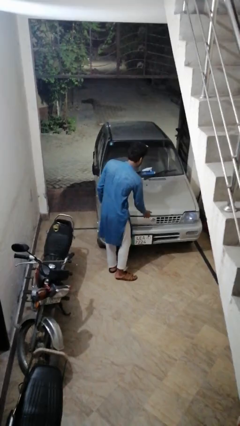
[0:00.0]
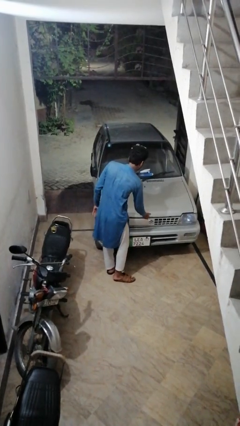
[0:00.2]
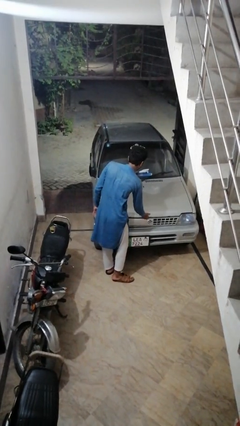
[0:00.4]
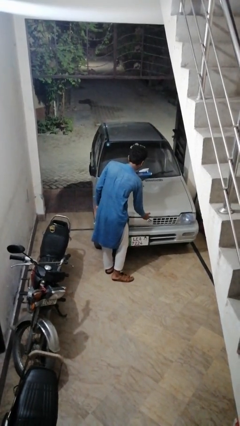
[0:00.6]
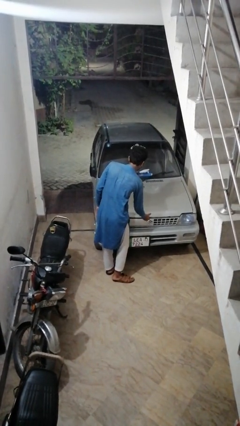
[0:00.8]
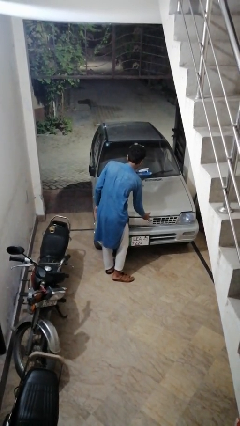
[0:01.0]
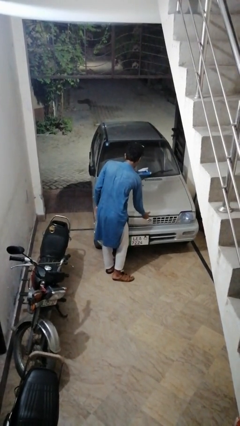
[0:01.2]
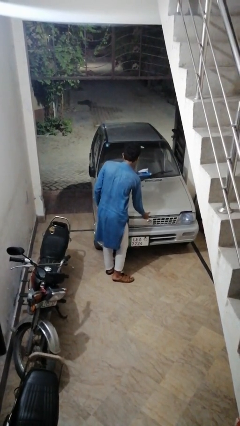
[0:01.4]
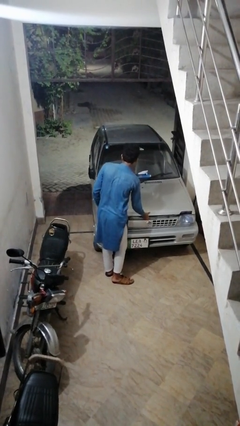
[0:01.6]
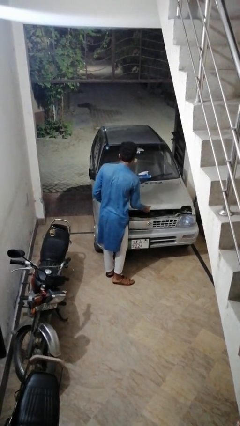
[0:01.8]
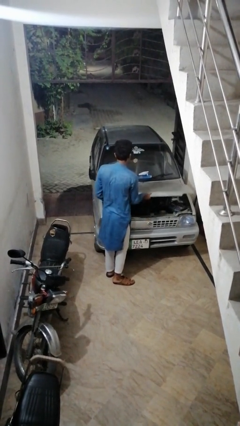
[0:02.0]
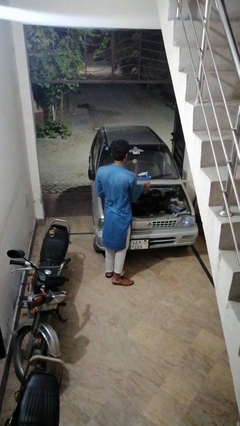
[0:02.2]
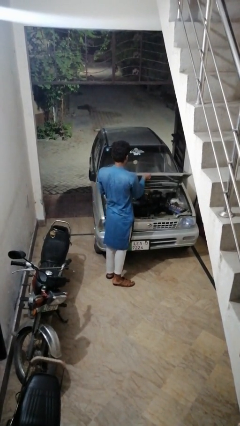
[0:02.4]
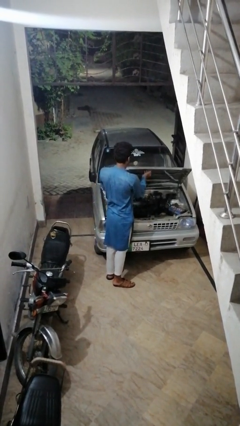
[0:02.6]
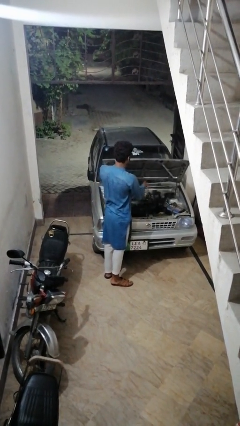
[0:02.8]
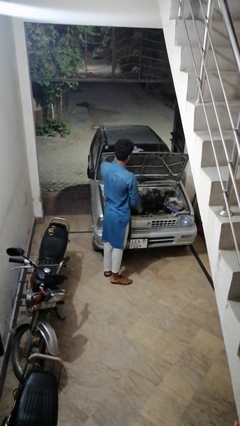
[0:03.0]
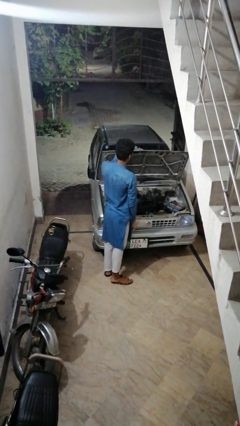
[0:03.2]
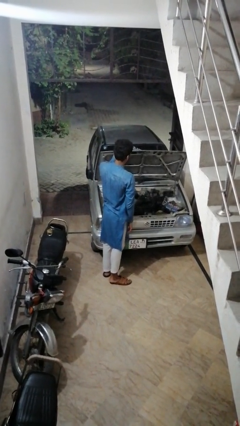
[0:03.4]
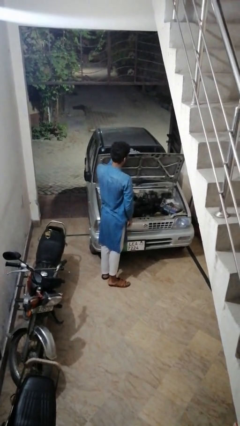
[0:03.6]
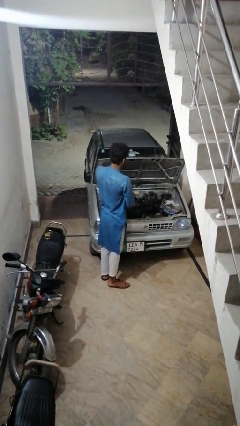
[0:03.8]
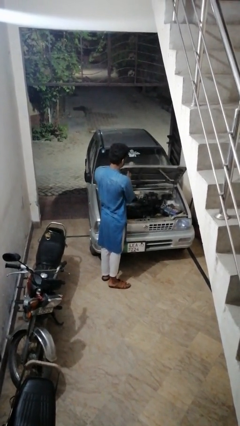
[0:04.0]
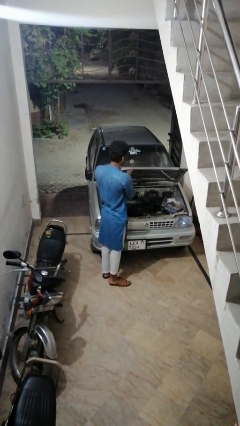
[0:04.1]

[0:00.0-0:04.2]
person opens car hood

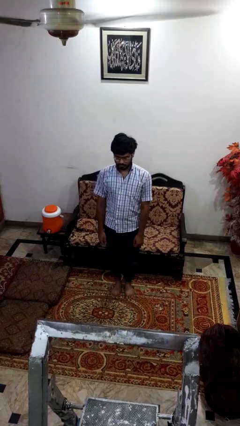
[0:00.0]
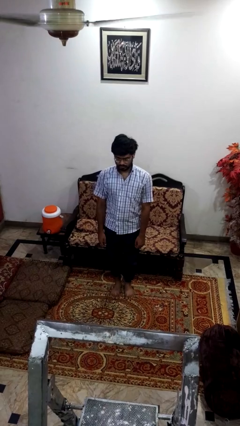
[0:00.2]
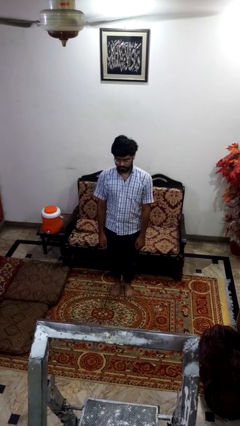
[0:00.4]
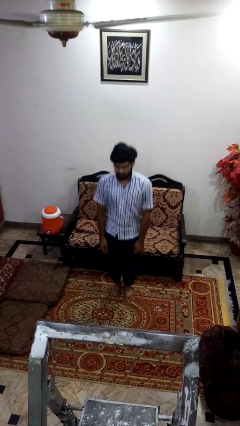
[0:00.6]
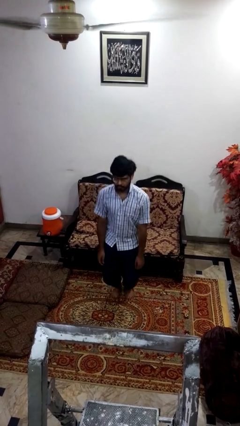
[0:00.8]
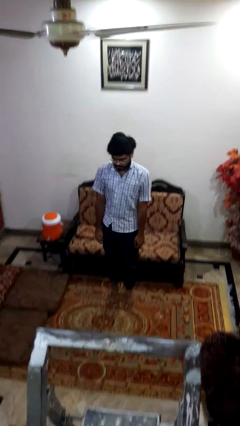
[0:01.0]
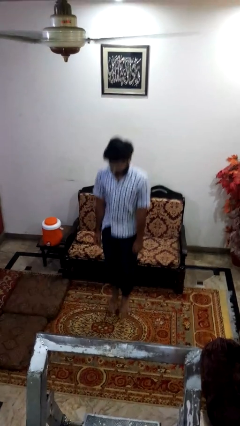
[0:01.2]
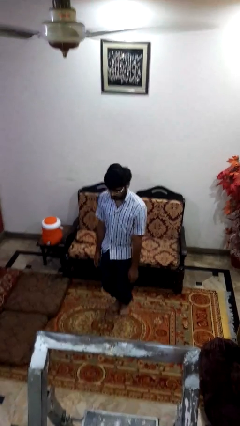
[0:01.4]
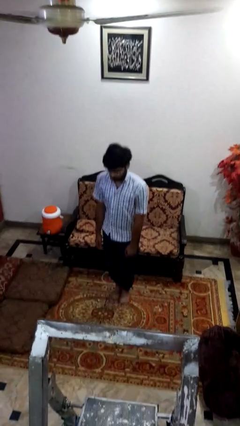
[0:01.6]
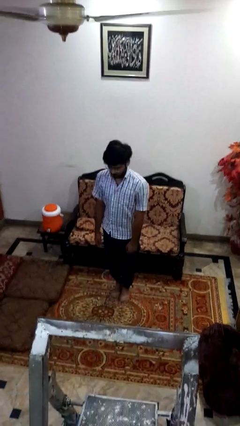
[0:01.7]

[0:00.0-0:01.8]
person jumps

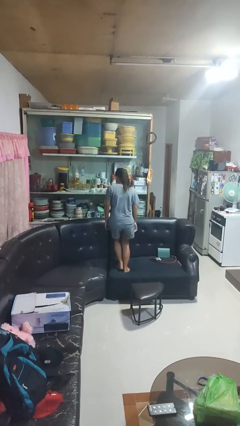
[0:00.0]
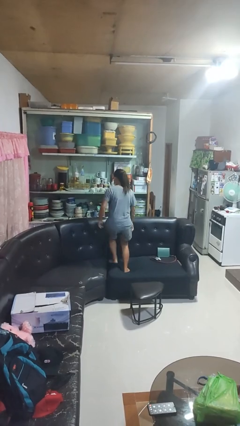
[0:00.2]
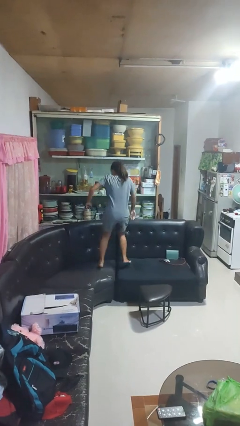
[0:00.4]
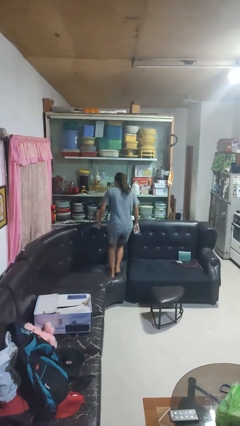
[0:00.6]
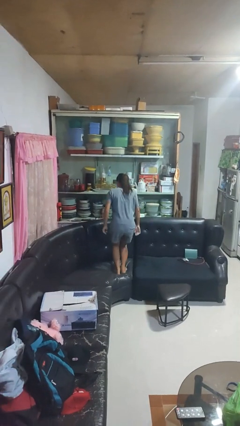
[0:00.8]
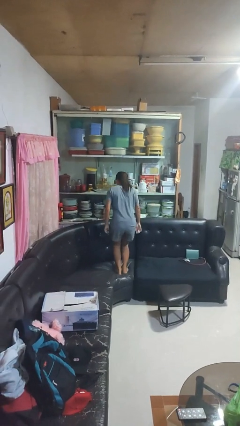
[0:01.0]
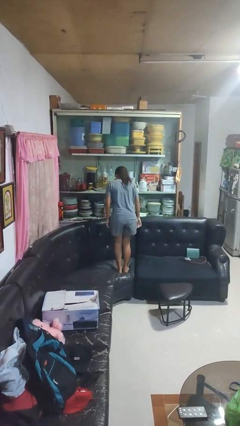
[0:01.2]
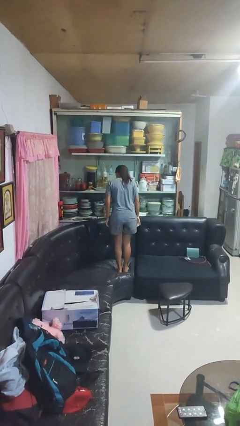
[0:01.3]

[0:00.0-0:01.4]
person jumps on couch

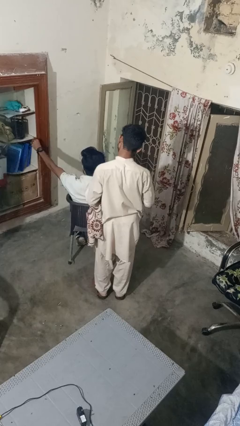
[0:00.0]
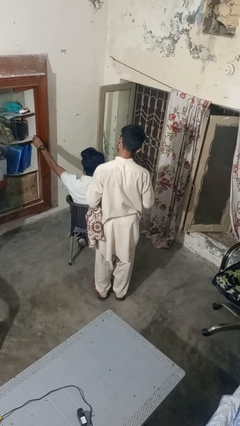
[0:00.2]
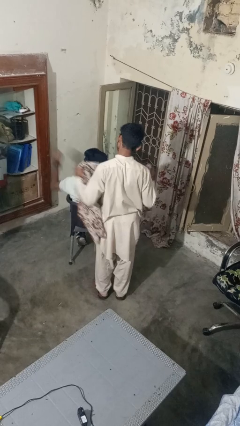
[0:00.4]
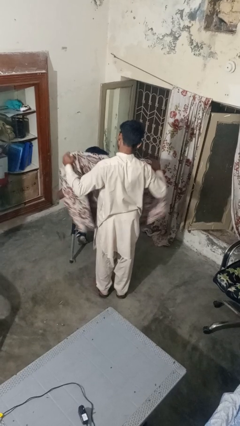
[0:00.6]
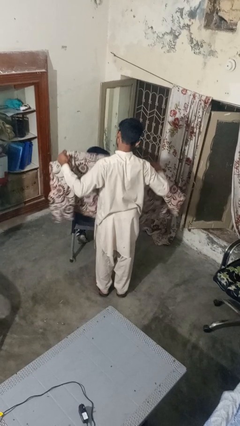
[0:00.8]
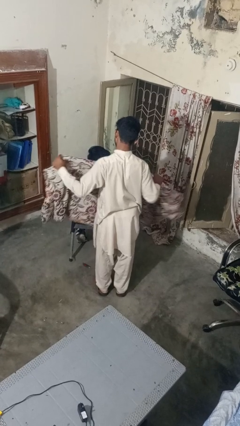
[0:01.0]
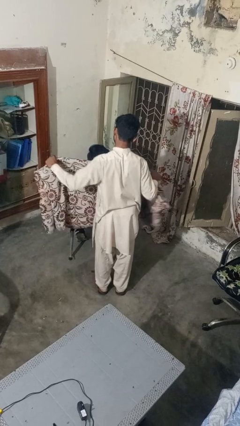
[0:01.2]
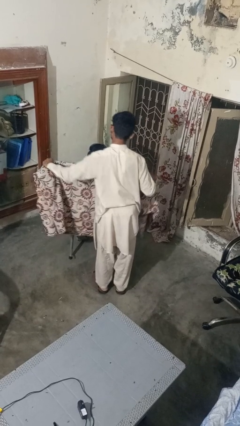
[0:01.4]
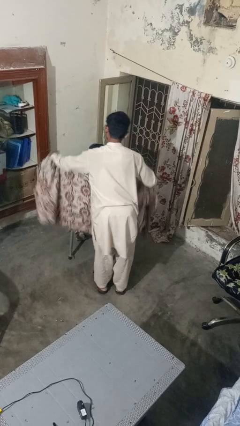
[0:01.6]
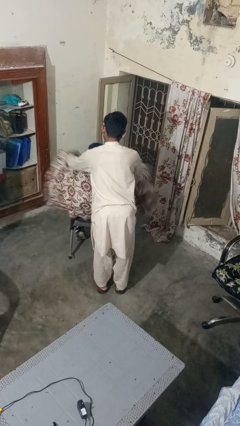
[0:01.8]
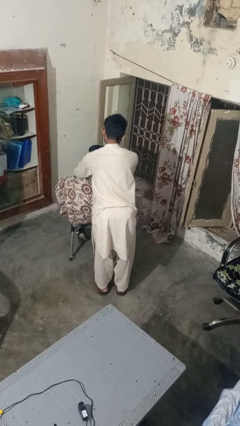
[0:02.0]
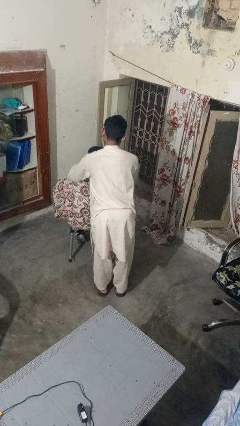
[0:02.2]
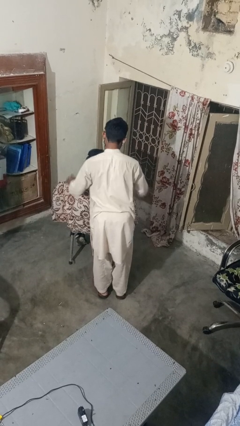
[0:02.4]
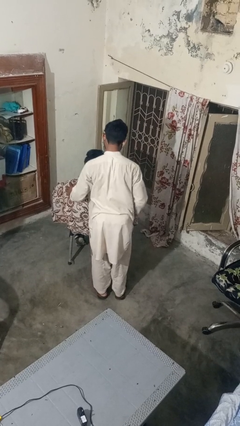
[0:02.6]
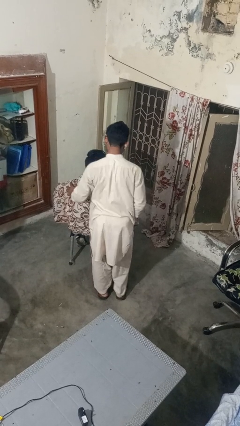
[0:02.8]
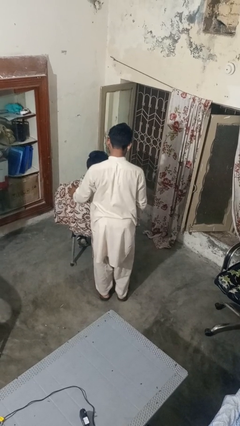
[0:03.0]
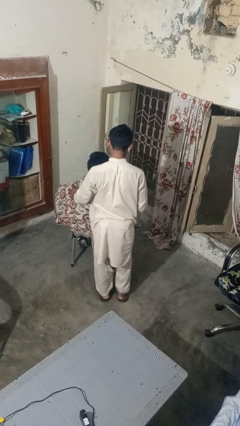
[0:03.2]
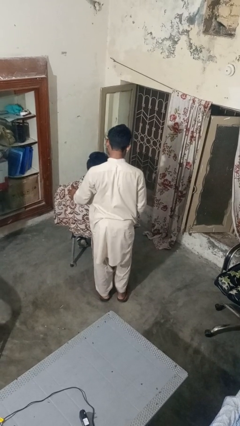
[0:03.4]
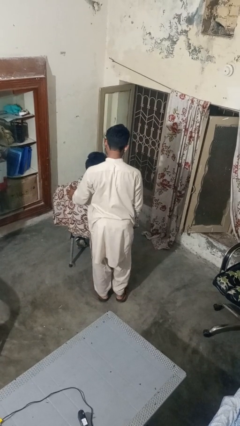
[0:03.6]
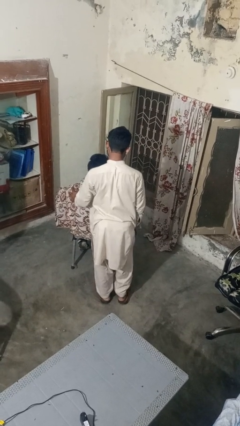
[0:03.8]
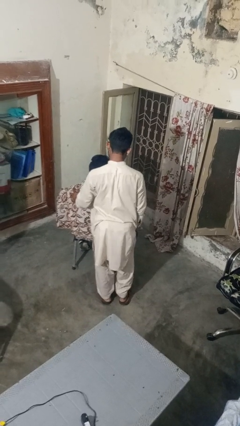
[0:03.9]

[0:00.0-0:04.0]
person covers friend with blanket

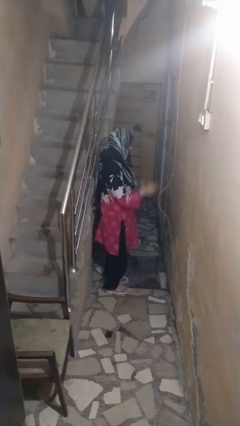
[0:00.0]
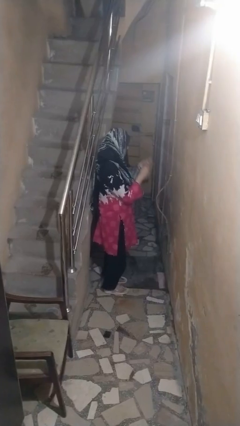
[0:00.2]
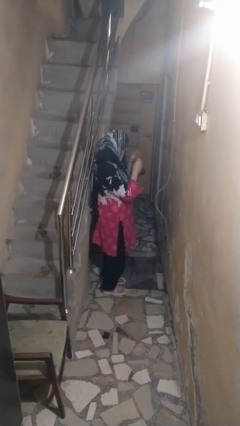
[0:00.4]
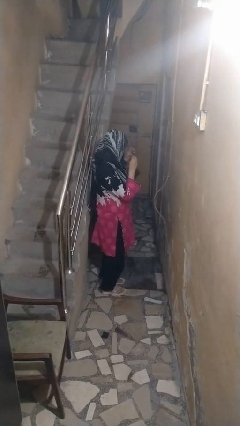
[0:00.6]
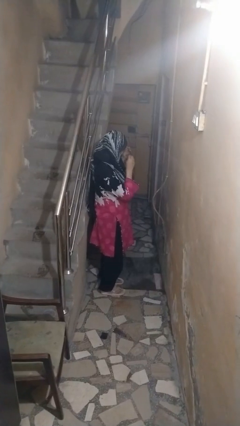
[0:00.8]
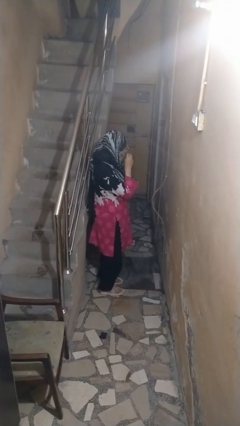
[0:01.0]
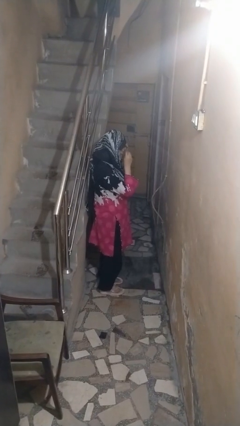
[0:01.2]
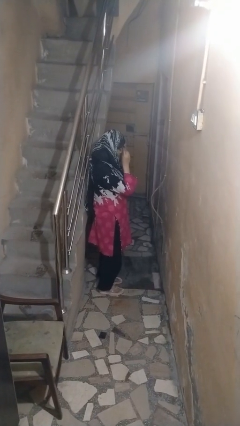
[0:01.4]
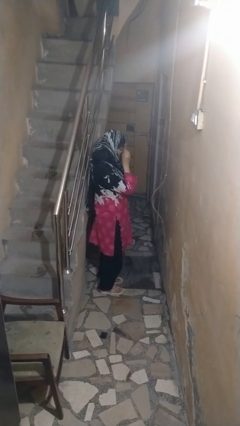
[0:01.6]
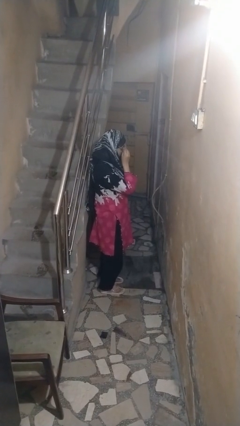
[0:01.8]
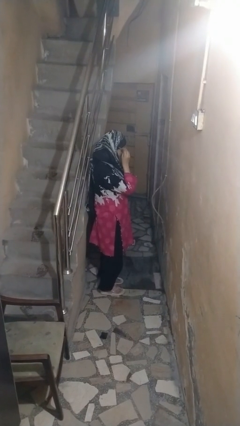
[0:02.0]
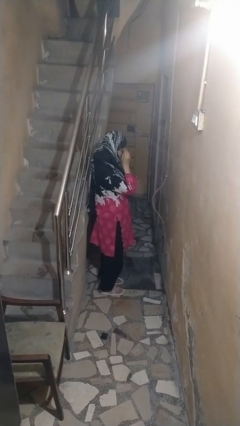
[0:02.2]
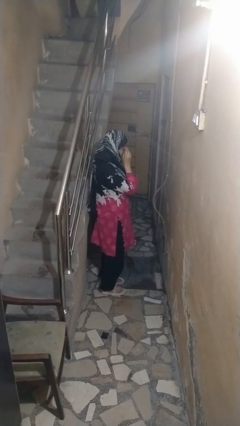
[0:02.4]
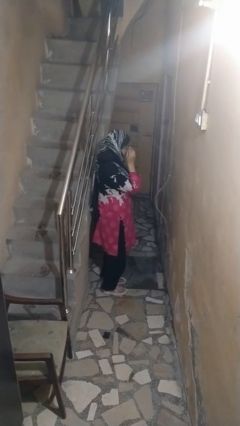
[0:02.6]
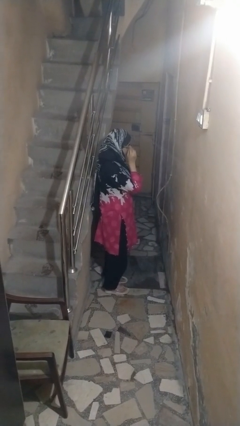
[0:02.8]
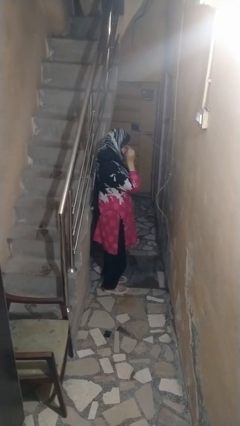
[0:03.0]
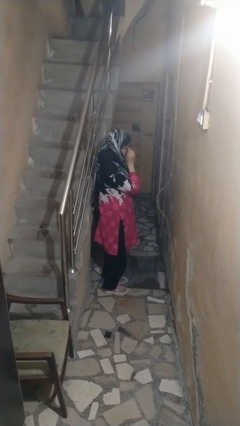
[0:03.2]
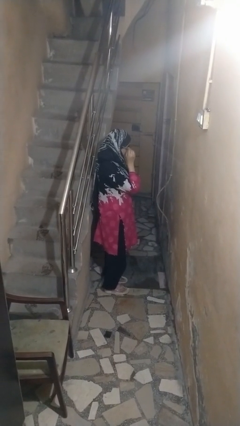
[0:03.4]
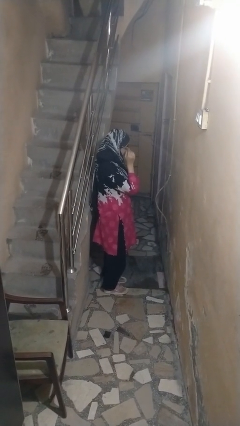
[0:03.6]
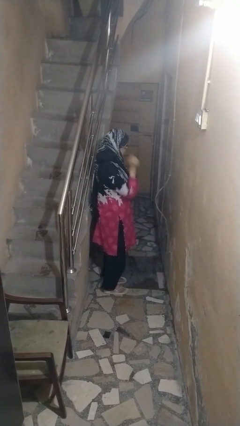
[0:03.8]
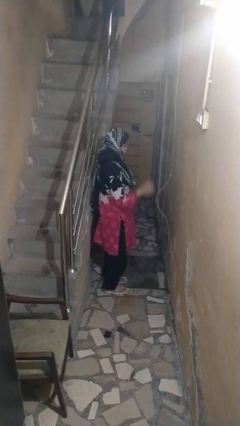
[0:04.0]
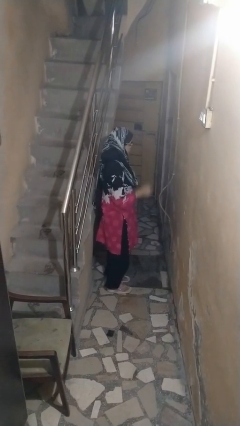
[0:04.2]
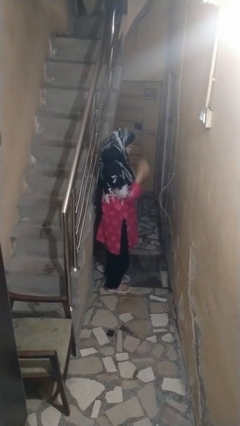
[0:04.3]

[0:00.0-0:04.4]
person puts on glasses

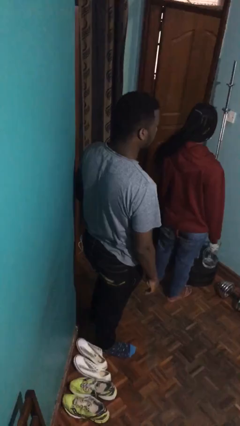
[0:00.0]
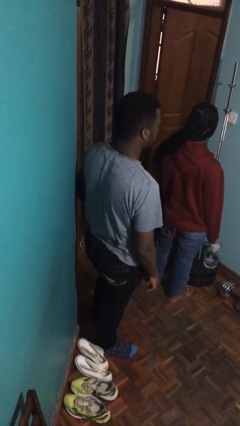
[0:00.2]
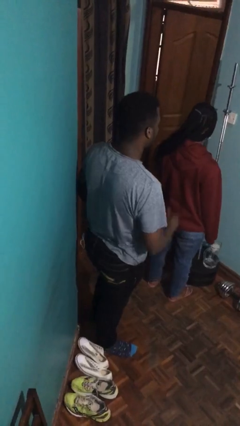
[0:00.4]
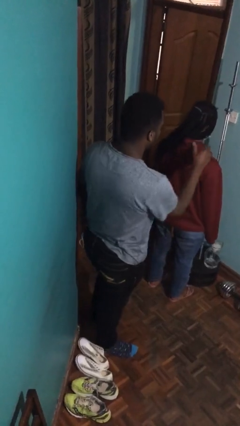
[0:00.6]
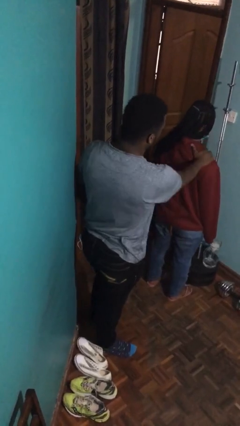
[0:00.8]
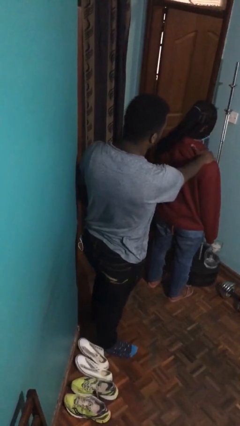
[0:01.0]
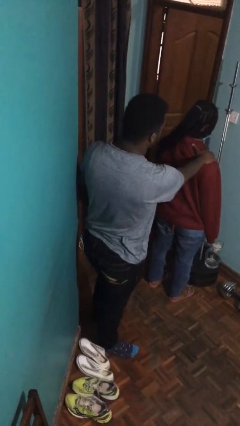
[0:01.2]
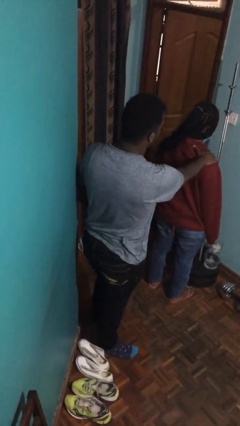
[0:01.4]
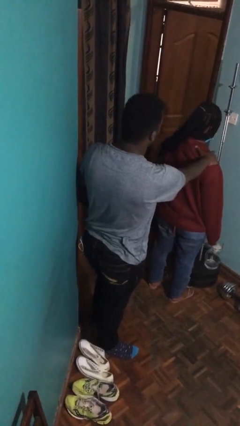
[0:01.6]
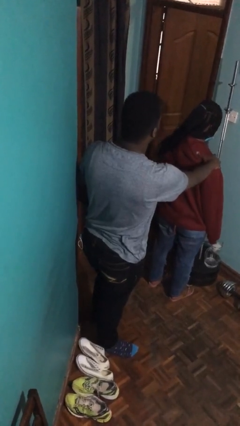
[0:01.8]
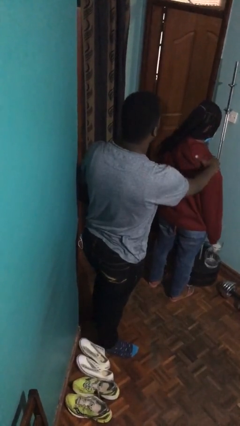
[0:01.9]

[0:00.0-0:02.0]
person grabs person by shoulder
